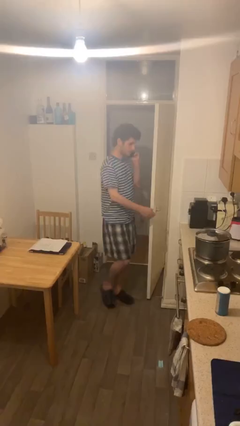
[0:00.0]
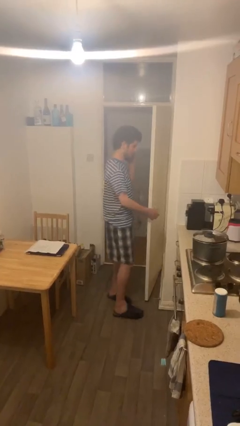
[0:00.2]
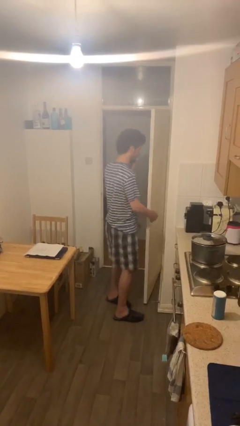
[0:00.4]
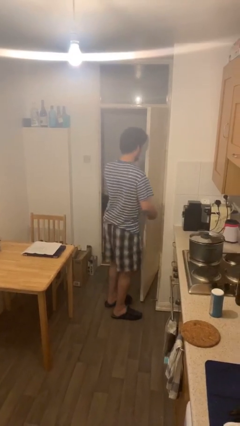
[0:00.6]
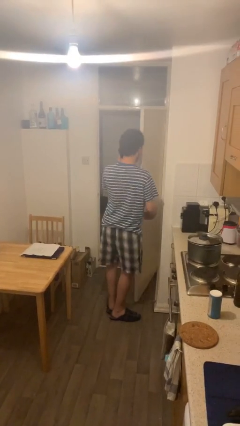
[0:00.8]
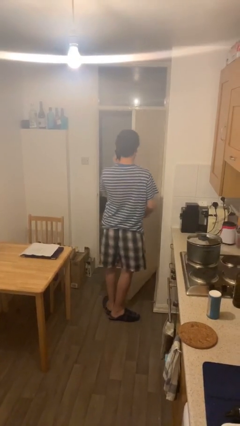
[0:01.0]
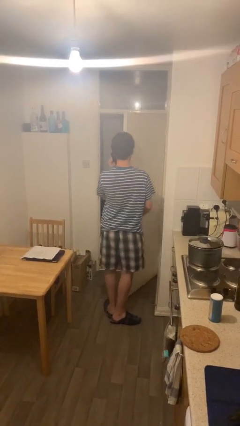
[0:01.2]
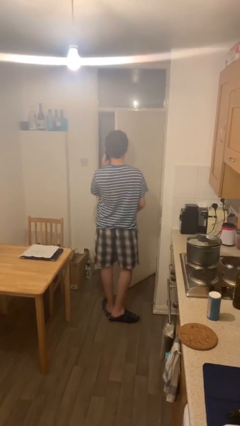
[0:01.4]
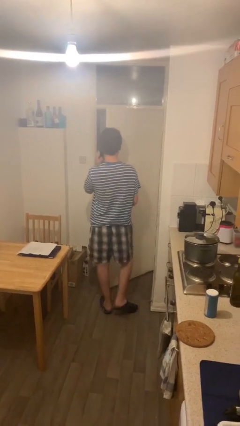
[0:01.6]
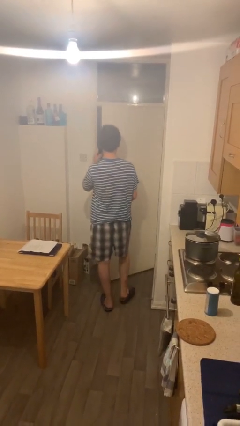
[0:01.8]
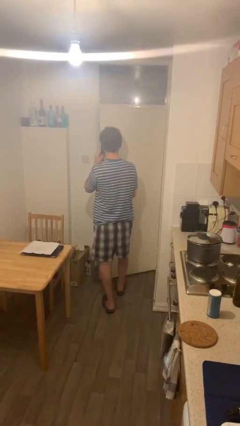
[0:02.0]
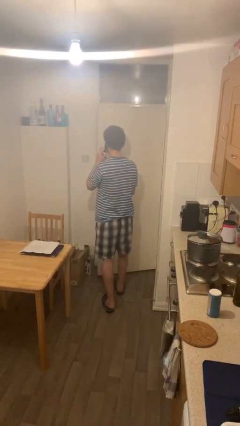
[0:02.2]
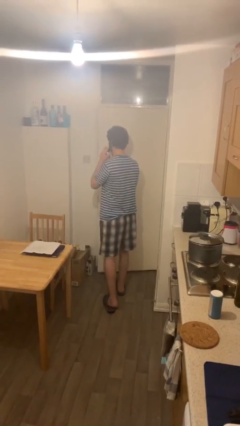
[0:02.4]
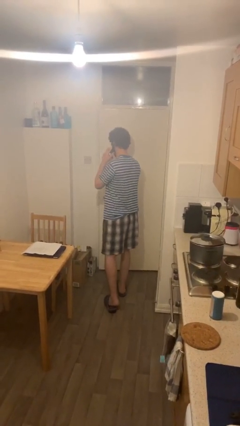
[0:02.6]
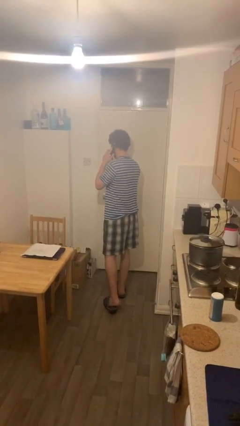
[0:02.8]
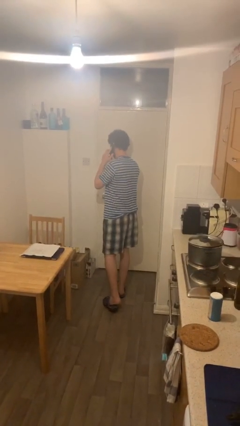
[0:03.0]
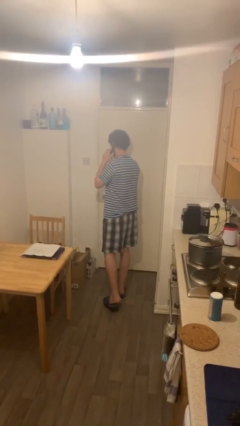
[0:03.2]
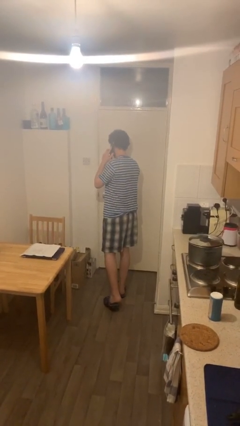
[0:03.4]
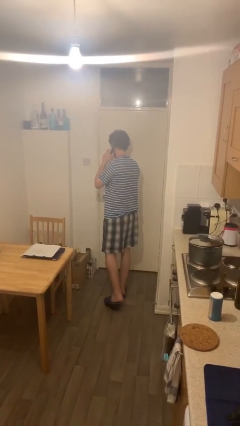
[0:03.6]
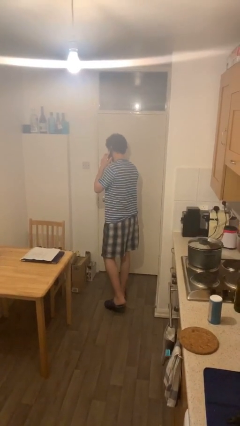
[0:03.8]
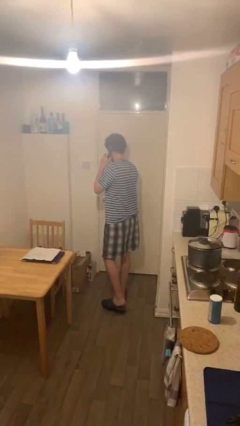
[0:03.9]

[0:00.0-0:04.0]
person closes facility door

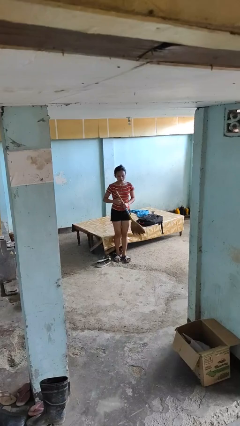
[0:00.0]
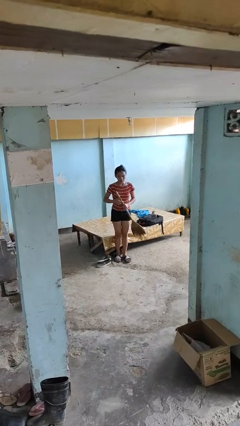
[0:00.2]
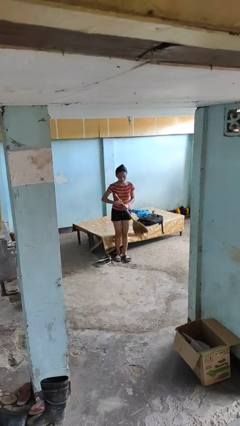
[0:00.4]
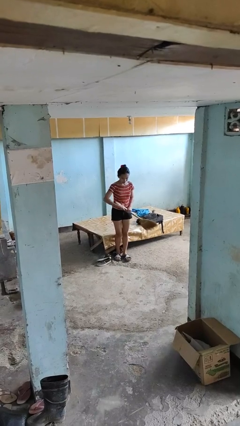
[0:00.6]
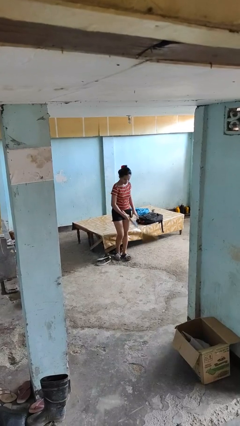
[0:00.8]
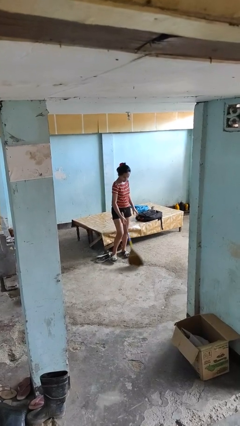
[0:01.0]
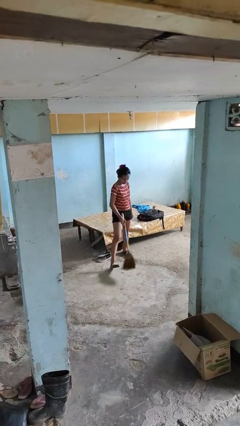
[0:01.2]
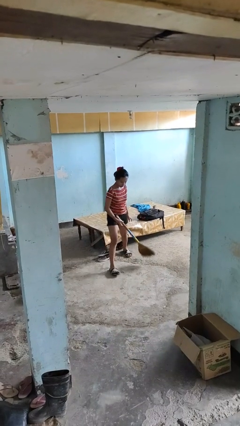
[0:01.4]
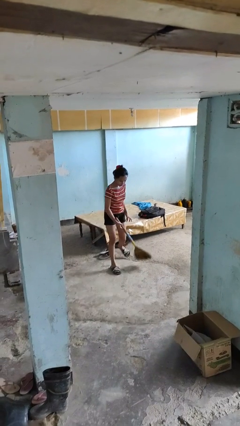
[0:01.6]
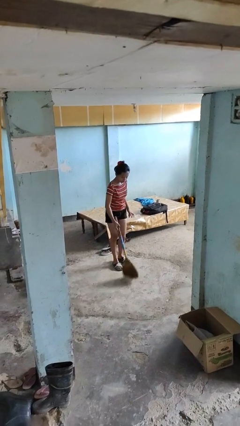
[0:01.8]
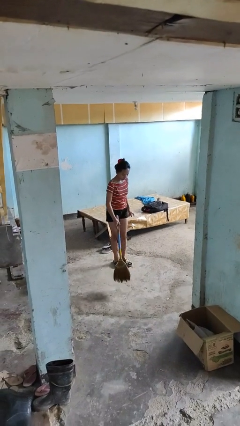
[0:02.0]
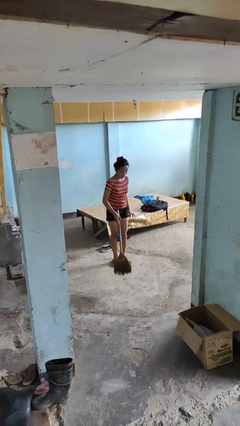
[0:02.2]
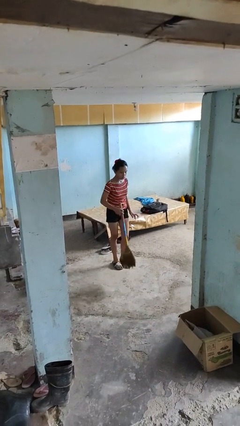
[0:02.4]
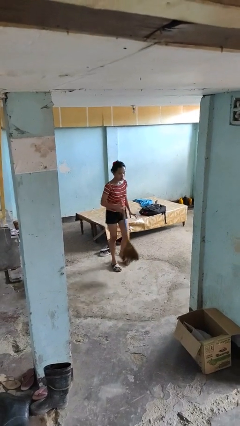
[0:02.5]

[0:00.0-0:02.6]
person sweeps floor

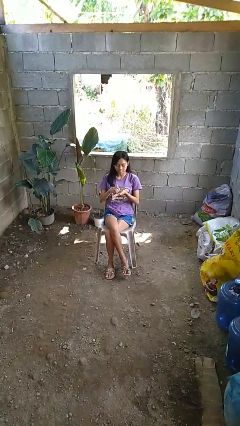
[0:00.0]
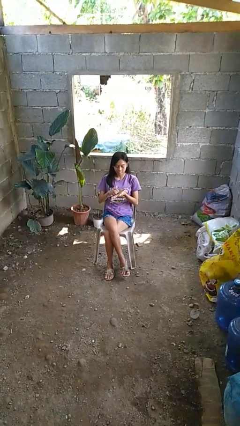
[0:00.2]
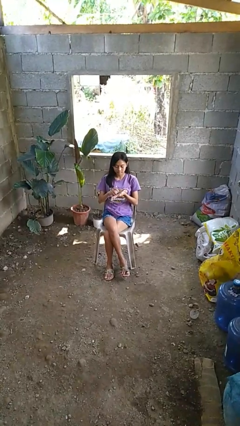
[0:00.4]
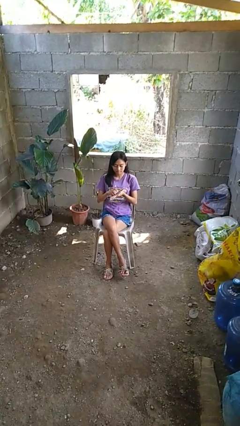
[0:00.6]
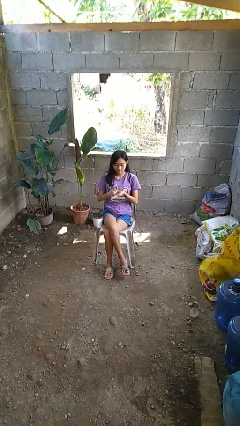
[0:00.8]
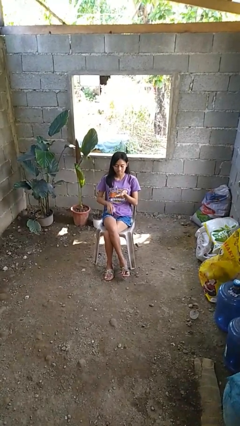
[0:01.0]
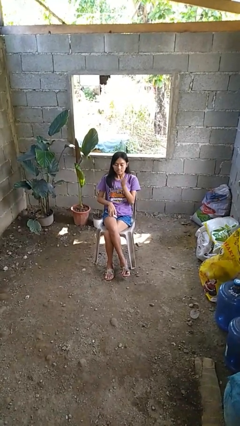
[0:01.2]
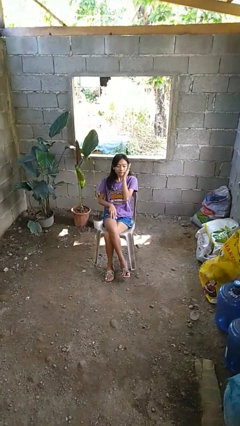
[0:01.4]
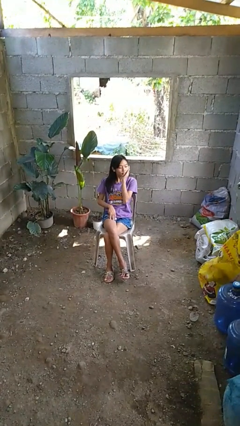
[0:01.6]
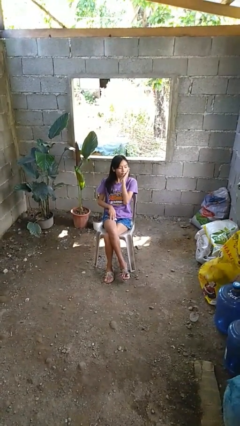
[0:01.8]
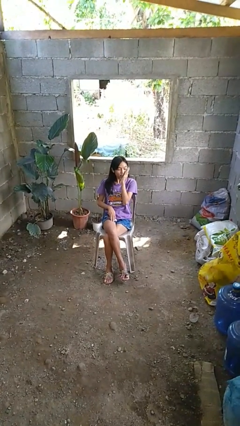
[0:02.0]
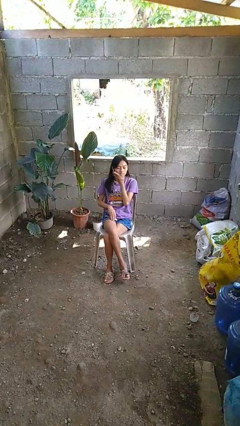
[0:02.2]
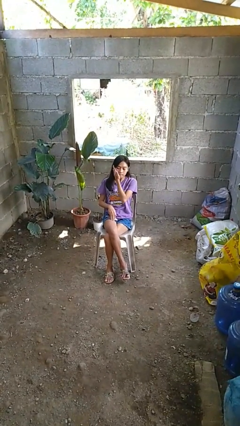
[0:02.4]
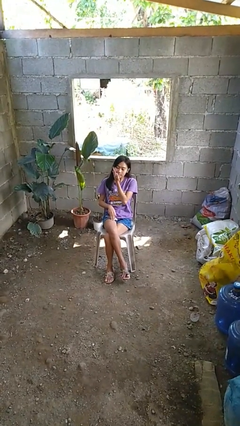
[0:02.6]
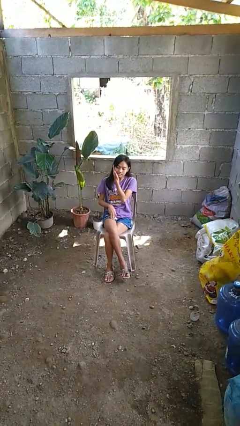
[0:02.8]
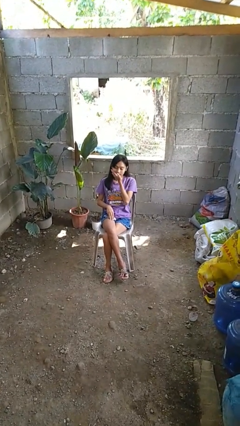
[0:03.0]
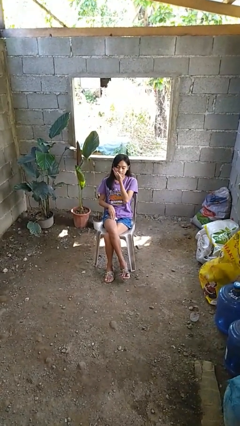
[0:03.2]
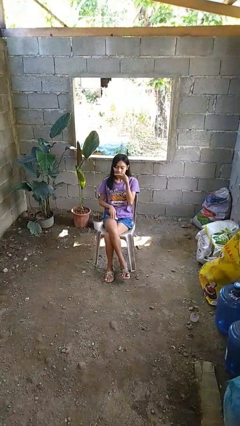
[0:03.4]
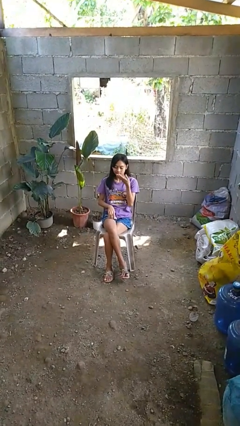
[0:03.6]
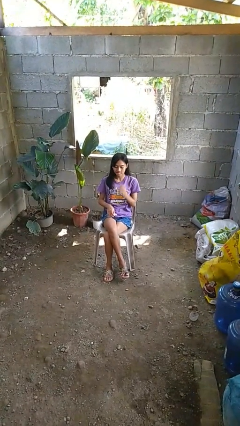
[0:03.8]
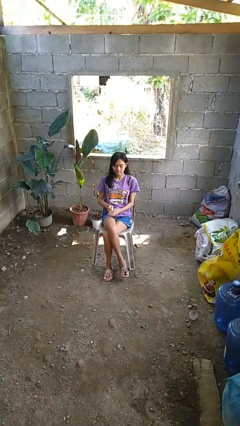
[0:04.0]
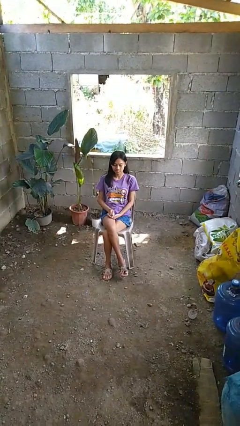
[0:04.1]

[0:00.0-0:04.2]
person applies facial moisturizer

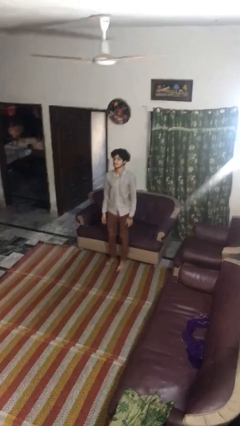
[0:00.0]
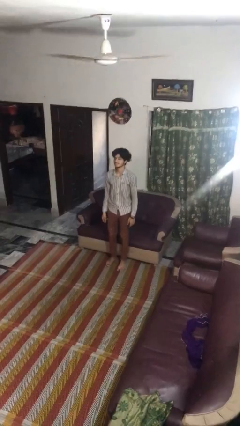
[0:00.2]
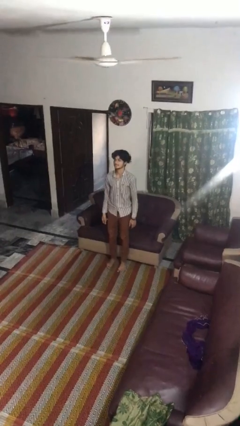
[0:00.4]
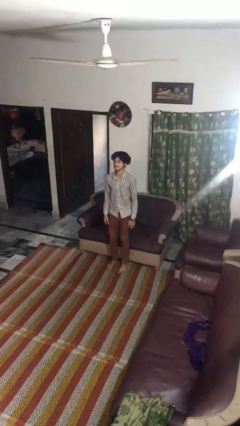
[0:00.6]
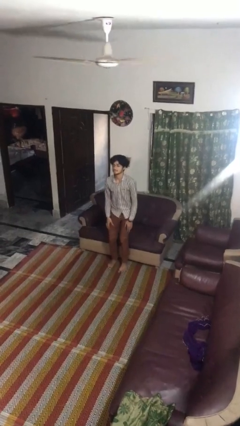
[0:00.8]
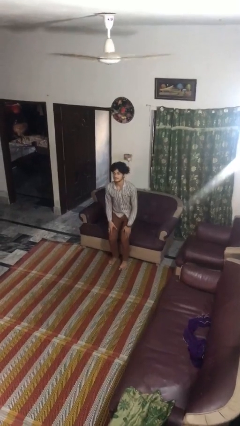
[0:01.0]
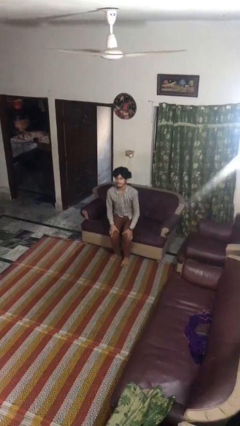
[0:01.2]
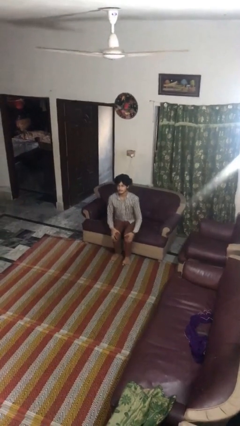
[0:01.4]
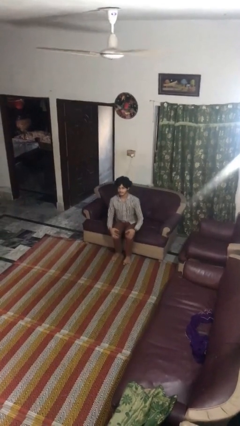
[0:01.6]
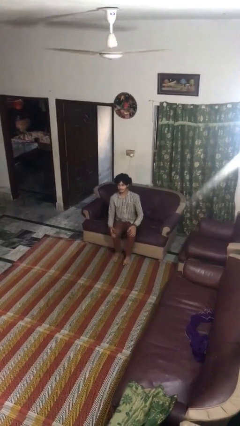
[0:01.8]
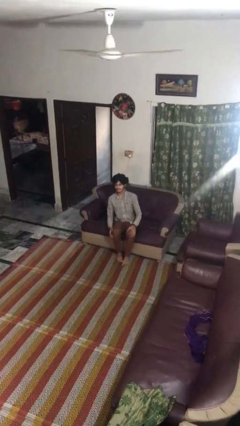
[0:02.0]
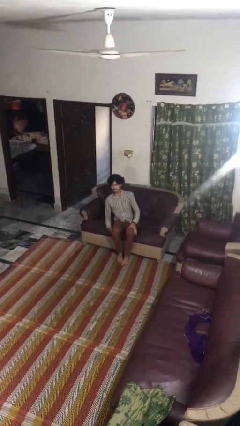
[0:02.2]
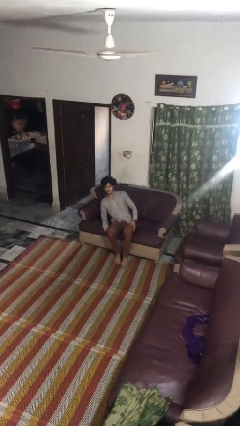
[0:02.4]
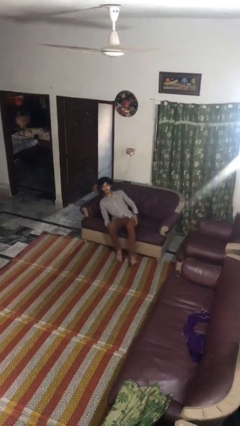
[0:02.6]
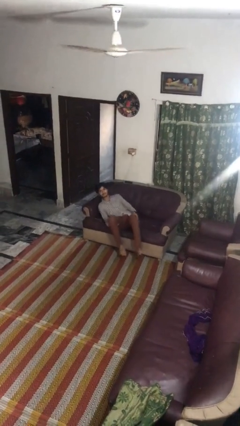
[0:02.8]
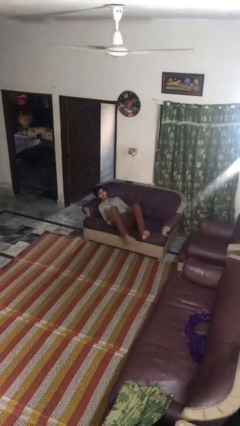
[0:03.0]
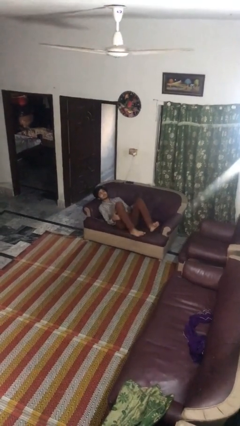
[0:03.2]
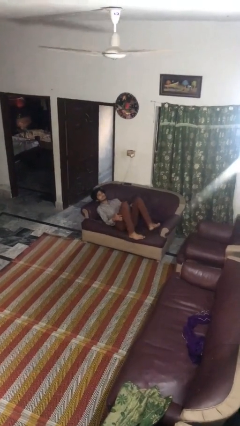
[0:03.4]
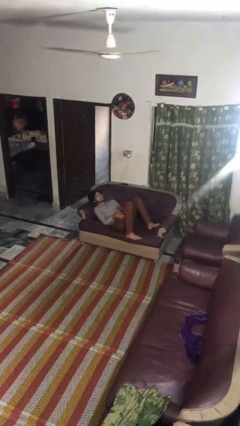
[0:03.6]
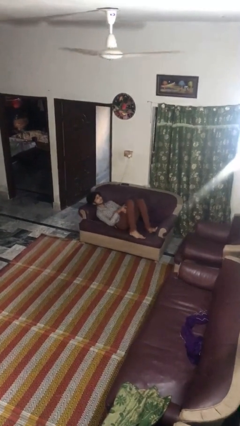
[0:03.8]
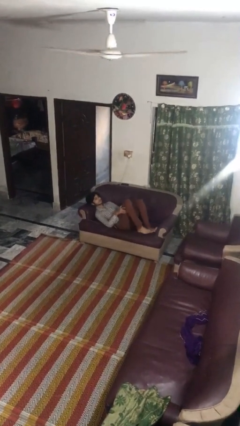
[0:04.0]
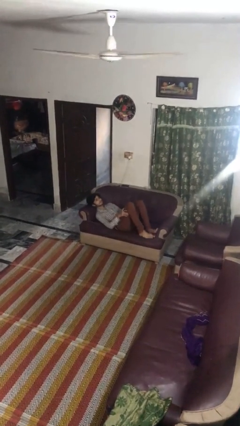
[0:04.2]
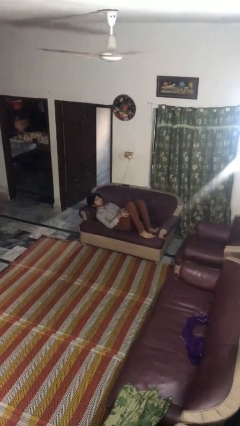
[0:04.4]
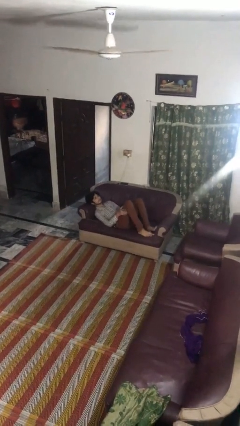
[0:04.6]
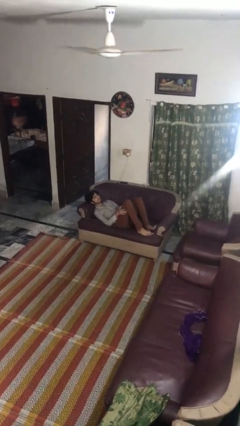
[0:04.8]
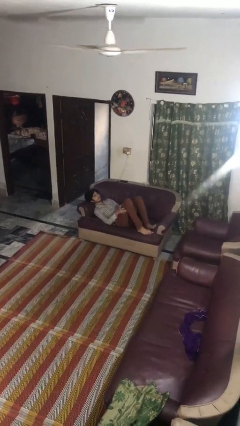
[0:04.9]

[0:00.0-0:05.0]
person lies down on couch

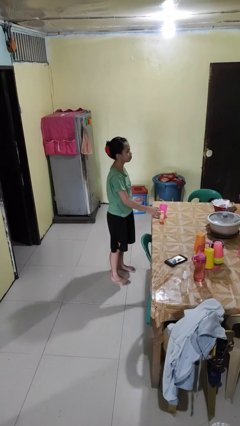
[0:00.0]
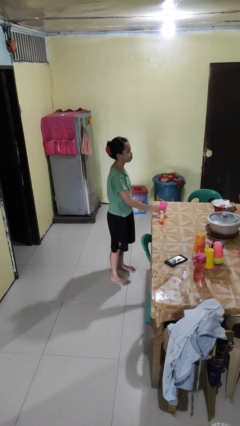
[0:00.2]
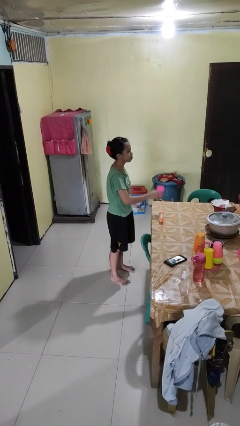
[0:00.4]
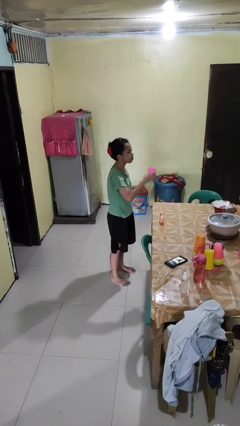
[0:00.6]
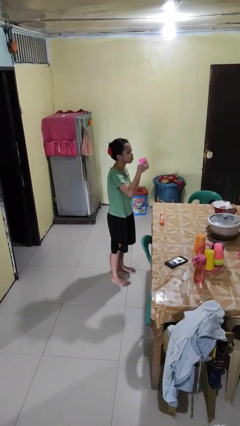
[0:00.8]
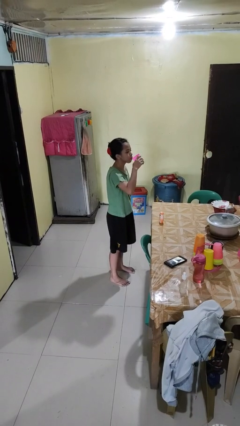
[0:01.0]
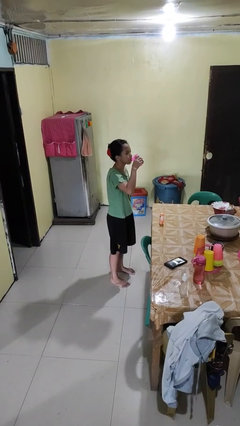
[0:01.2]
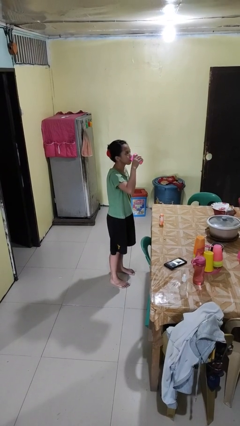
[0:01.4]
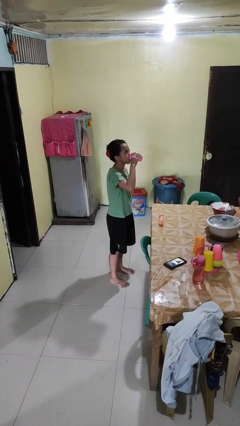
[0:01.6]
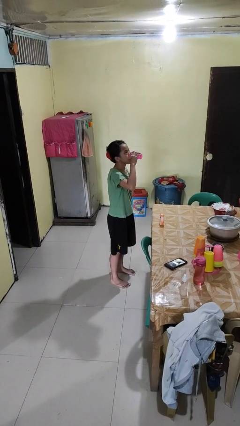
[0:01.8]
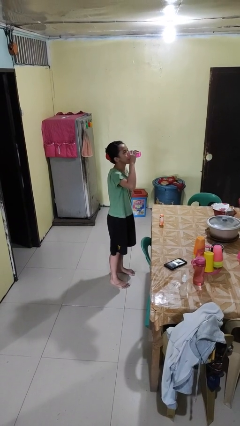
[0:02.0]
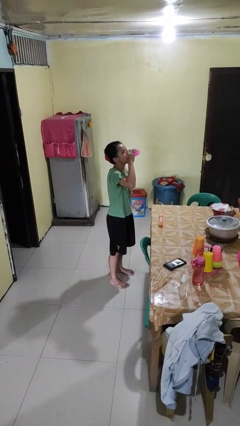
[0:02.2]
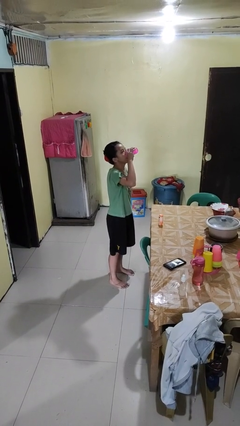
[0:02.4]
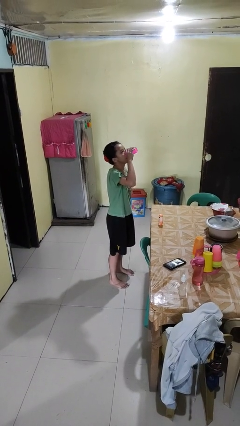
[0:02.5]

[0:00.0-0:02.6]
person drinks from cup
